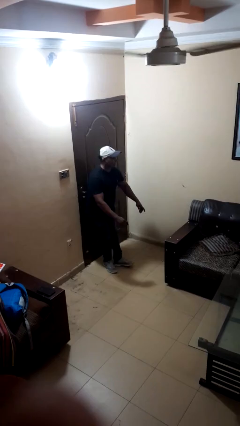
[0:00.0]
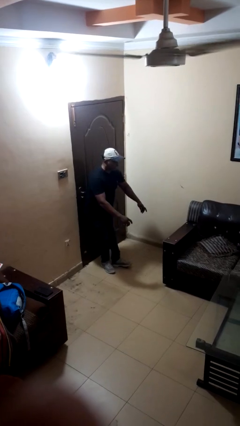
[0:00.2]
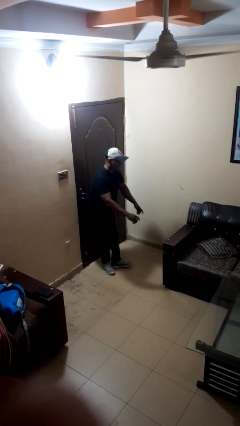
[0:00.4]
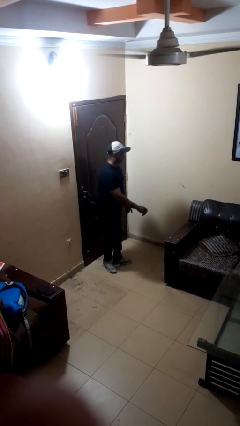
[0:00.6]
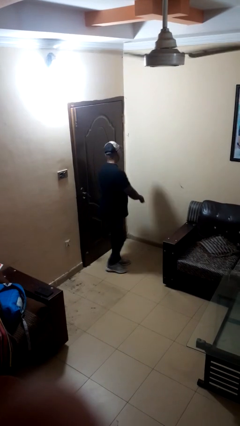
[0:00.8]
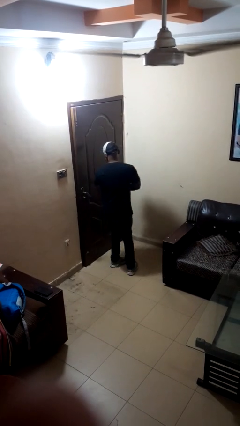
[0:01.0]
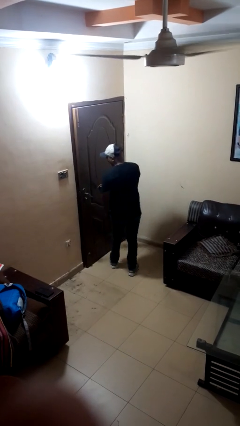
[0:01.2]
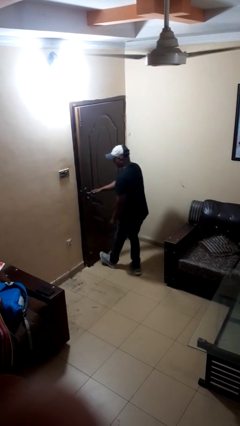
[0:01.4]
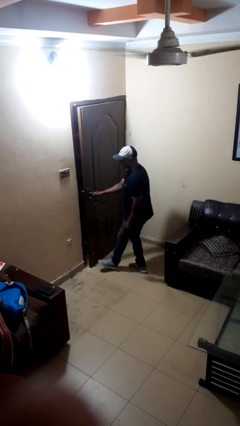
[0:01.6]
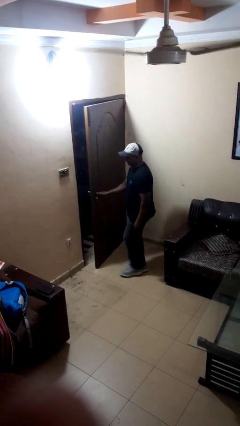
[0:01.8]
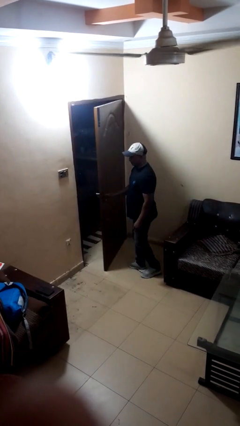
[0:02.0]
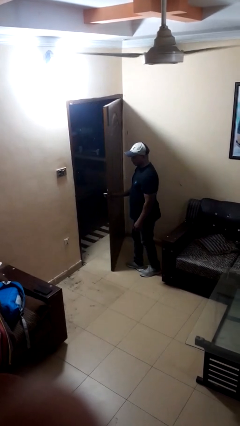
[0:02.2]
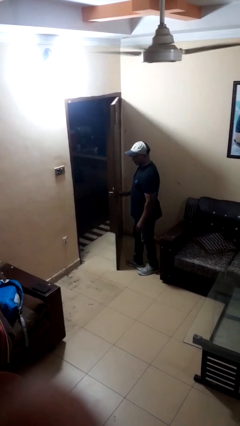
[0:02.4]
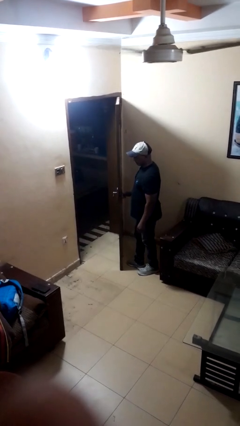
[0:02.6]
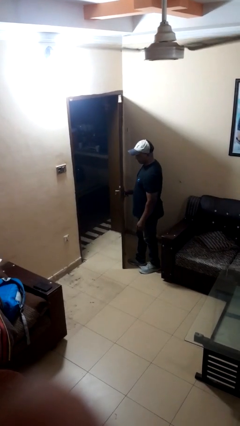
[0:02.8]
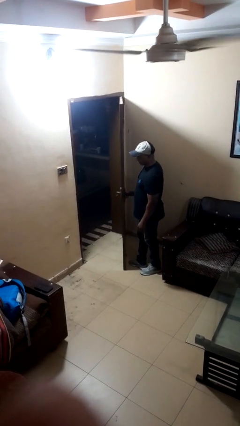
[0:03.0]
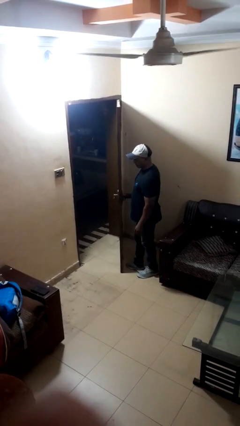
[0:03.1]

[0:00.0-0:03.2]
person opens facility door

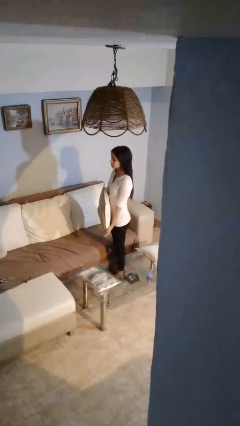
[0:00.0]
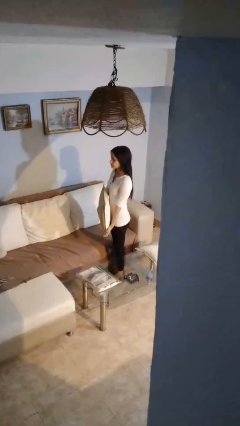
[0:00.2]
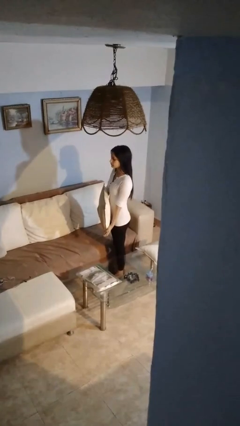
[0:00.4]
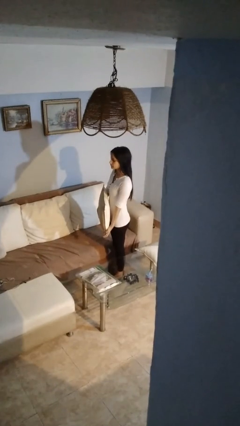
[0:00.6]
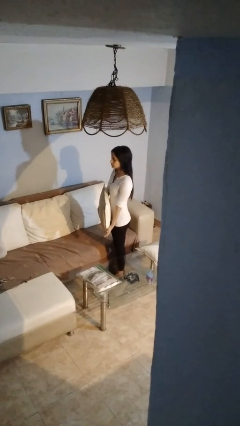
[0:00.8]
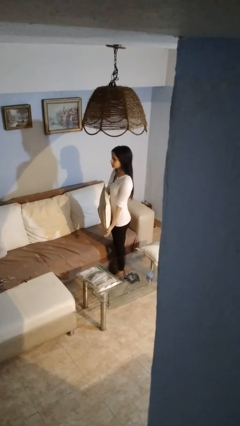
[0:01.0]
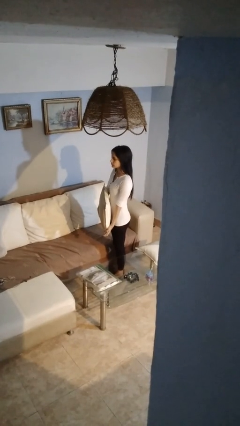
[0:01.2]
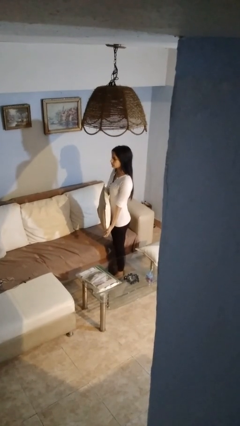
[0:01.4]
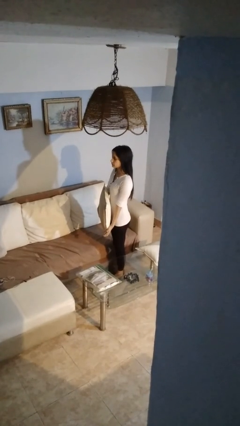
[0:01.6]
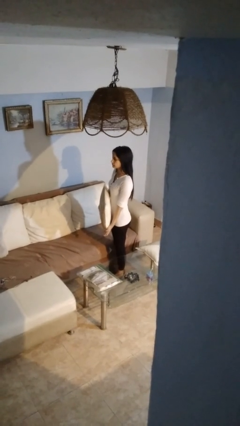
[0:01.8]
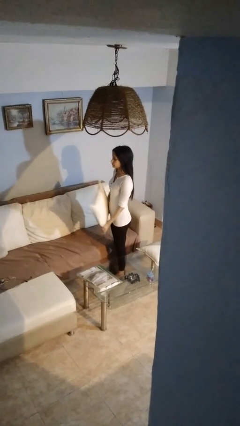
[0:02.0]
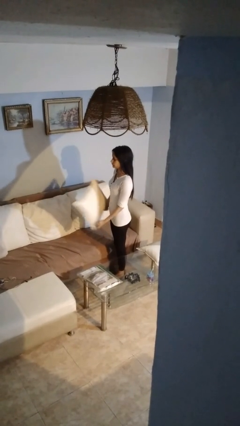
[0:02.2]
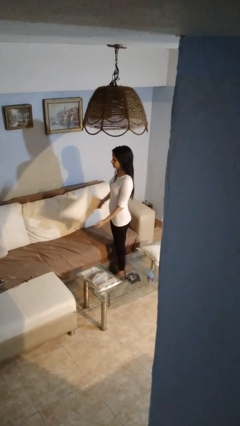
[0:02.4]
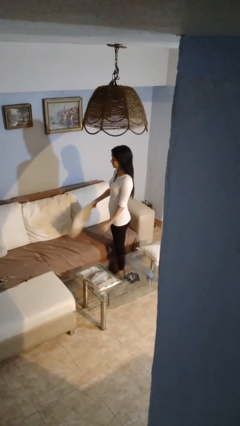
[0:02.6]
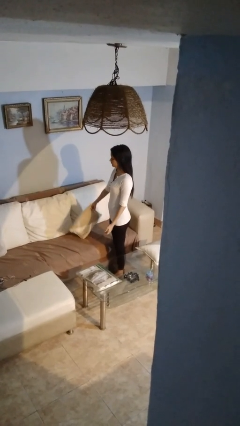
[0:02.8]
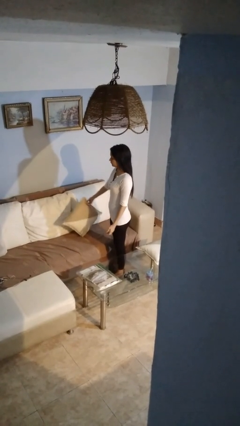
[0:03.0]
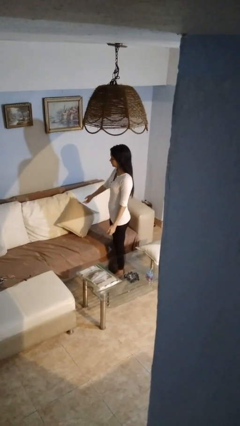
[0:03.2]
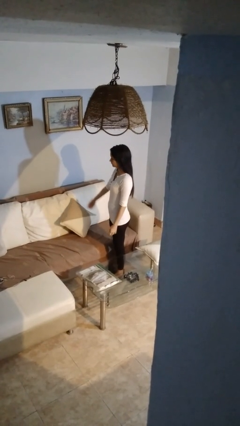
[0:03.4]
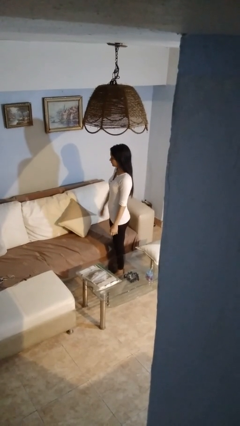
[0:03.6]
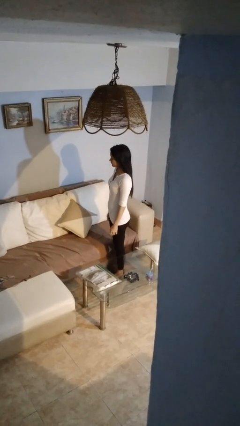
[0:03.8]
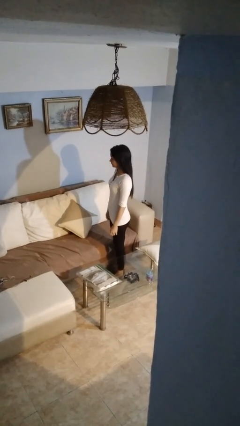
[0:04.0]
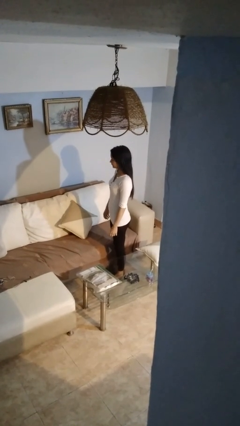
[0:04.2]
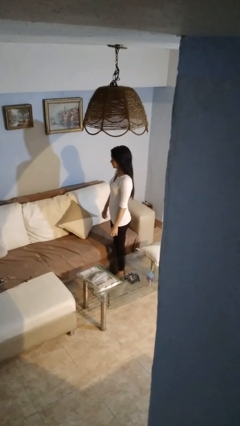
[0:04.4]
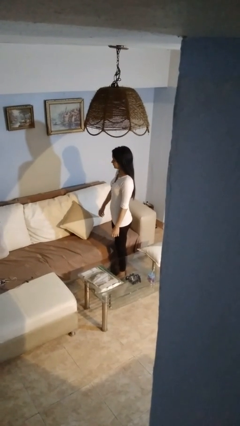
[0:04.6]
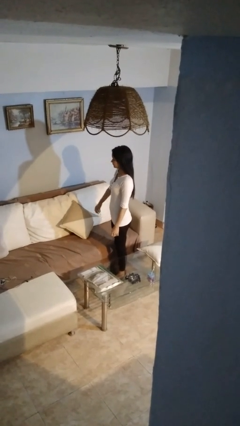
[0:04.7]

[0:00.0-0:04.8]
person picks up object from couch

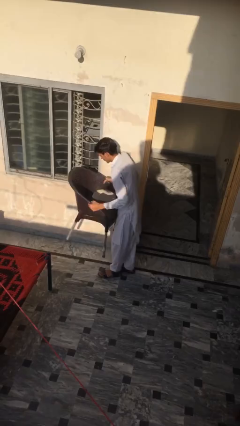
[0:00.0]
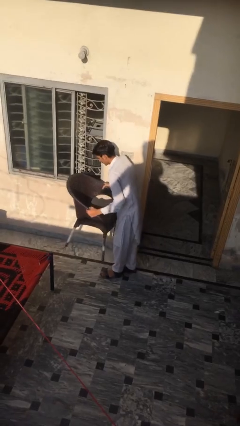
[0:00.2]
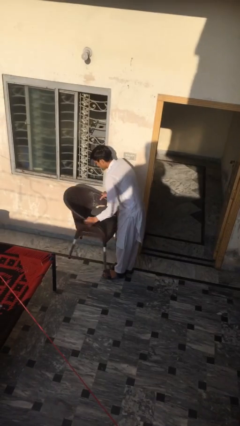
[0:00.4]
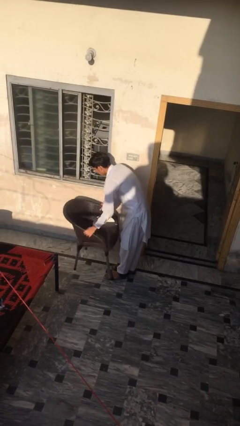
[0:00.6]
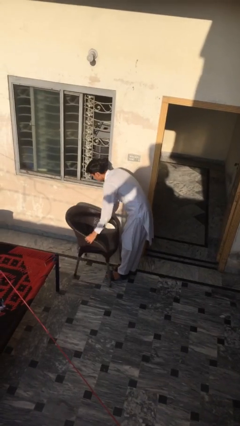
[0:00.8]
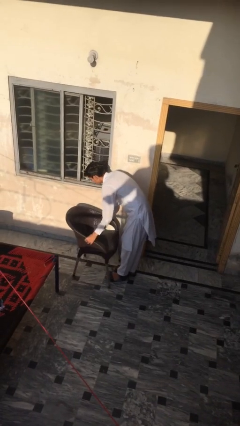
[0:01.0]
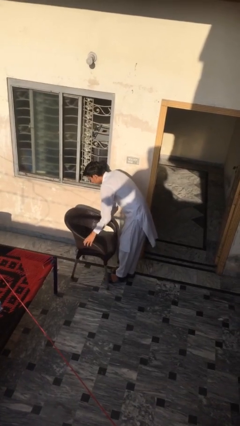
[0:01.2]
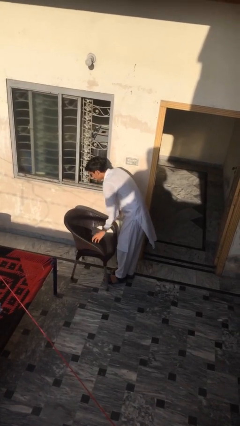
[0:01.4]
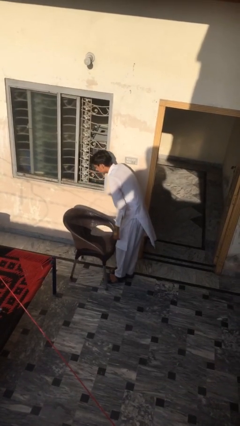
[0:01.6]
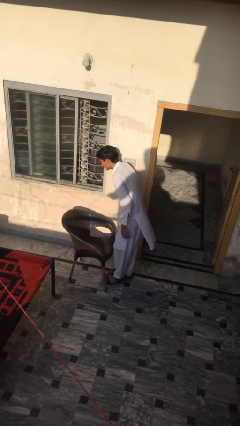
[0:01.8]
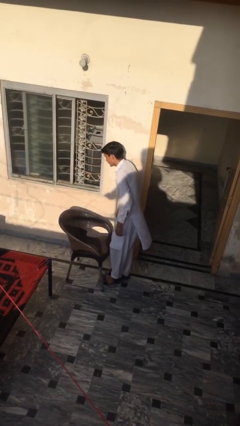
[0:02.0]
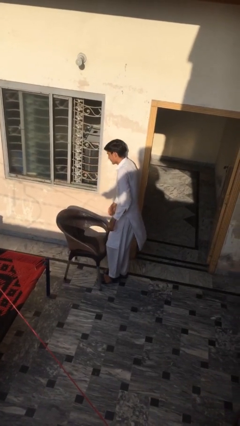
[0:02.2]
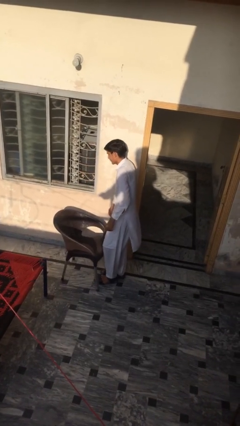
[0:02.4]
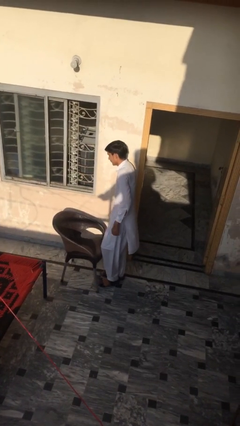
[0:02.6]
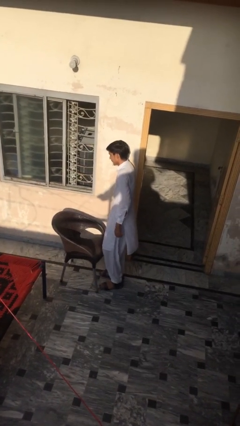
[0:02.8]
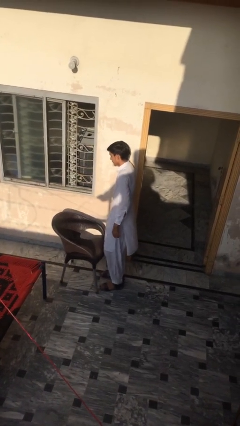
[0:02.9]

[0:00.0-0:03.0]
person puts down object on floor

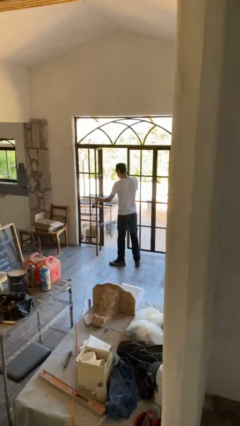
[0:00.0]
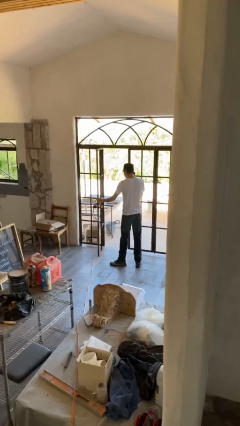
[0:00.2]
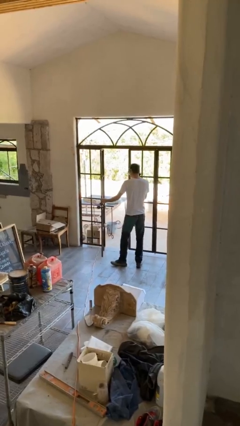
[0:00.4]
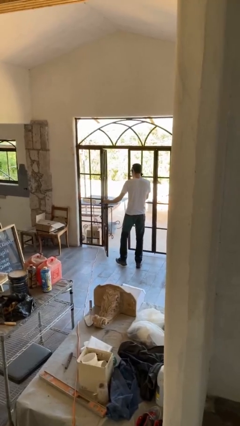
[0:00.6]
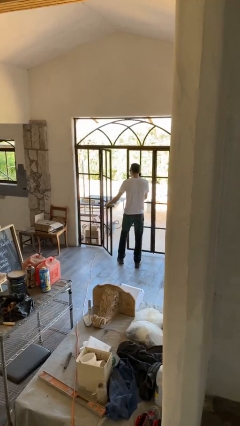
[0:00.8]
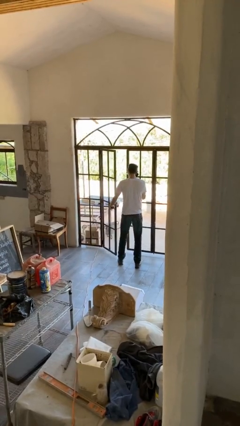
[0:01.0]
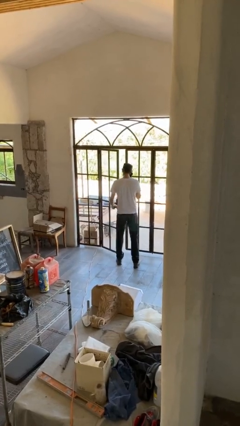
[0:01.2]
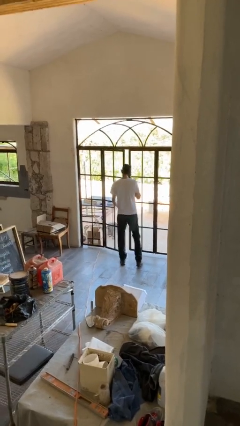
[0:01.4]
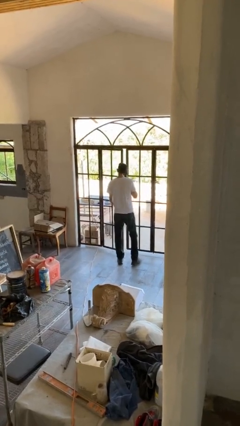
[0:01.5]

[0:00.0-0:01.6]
person enters scene through structure

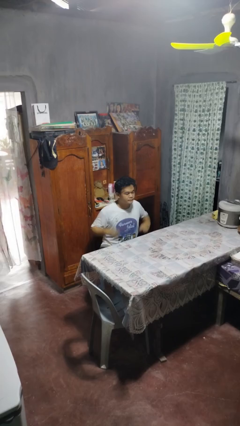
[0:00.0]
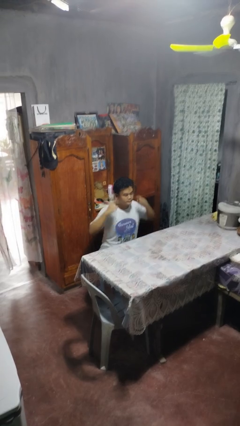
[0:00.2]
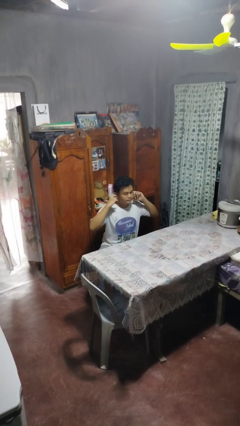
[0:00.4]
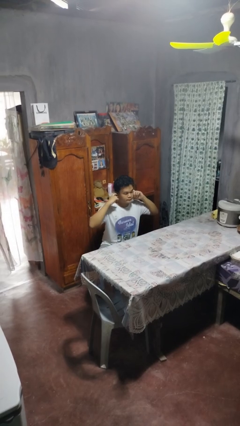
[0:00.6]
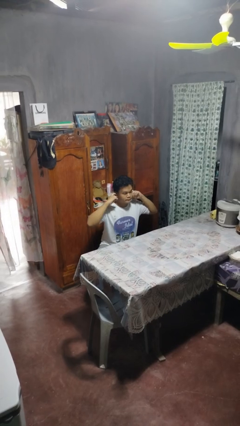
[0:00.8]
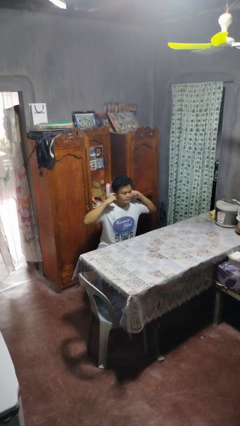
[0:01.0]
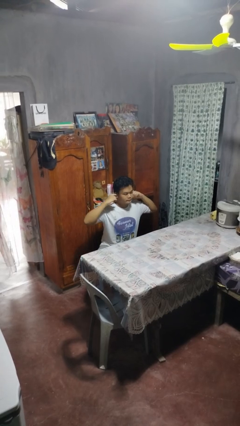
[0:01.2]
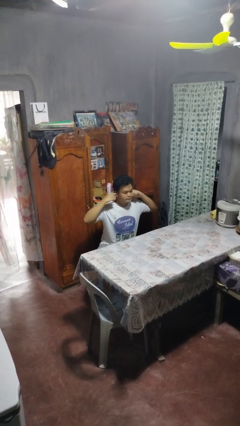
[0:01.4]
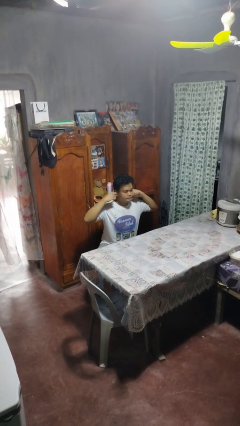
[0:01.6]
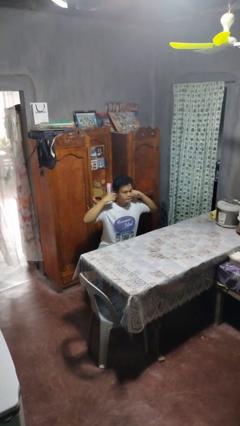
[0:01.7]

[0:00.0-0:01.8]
person puts fingers in ear

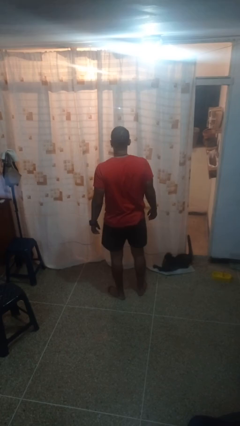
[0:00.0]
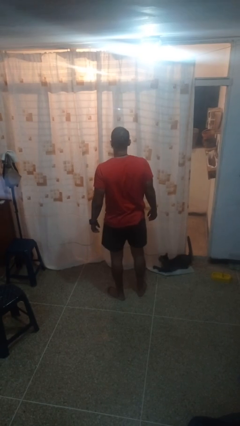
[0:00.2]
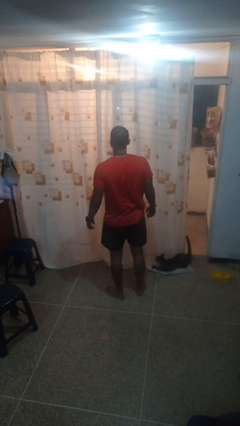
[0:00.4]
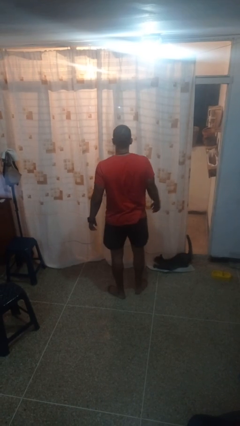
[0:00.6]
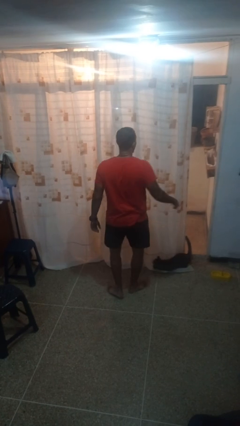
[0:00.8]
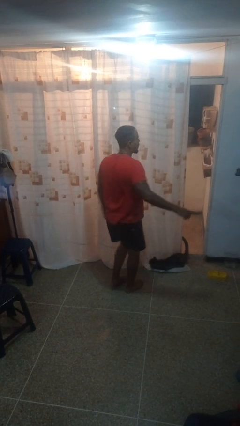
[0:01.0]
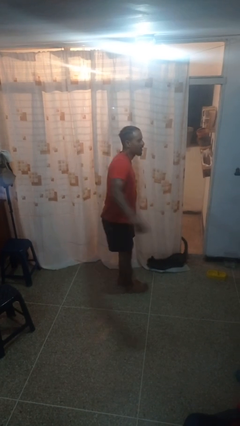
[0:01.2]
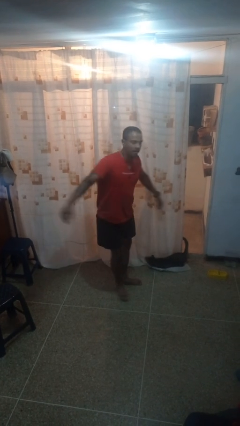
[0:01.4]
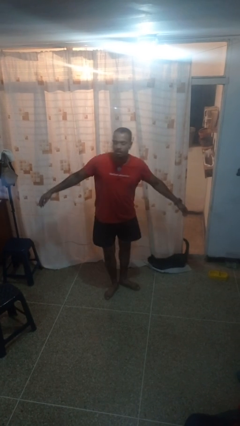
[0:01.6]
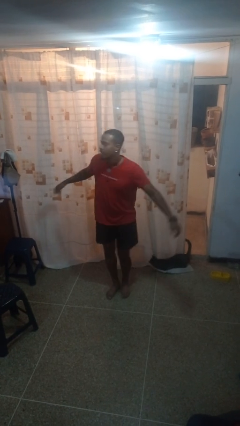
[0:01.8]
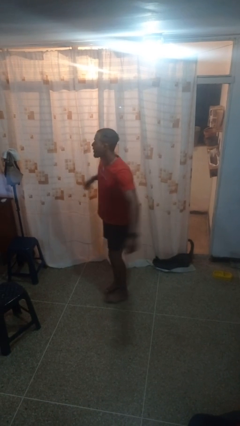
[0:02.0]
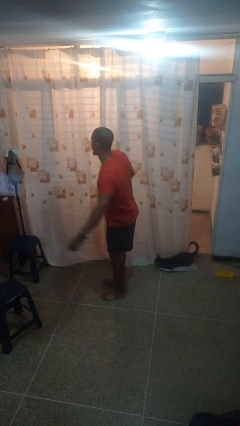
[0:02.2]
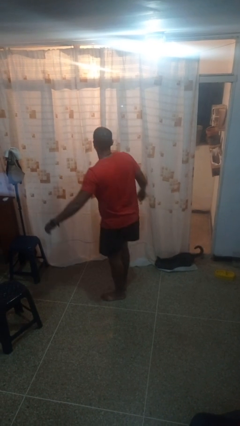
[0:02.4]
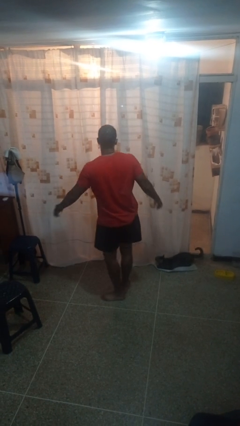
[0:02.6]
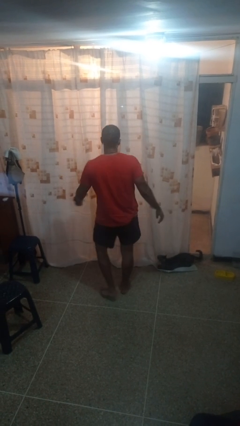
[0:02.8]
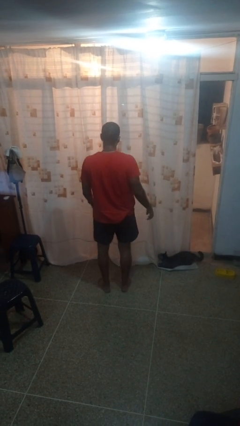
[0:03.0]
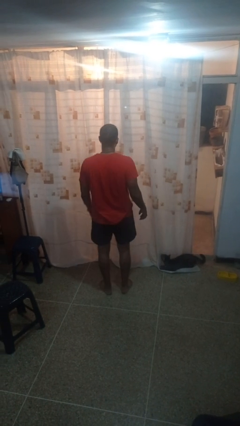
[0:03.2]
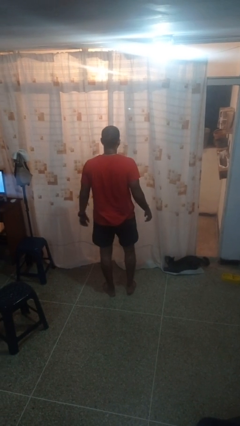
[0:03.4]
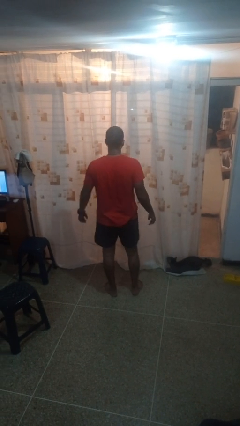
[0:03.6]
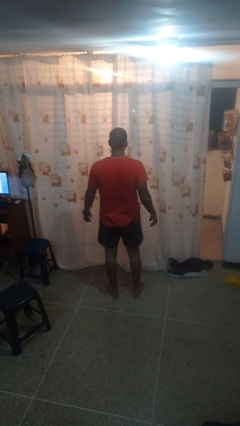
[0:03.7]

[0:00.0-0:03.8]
person twirls
